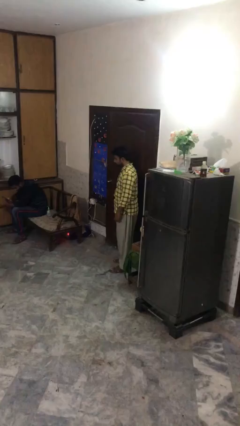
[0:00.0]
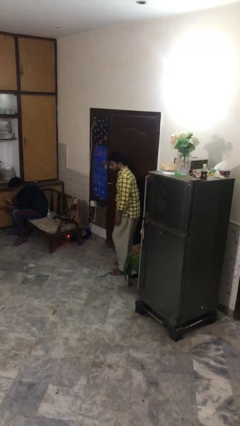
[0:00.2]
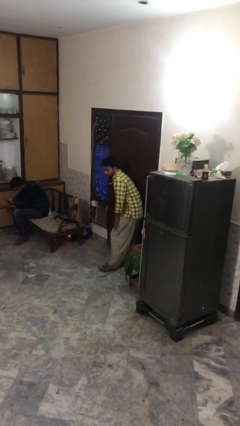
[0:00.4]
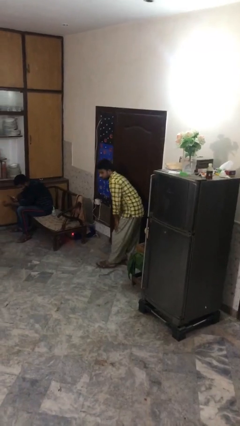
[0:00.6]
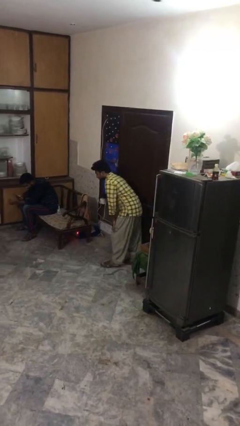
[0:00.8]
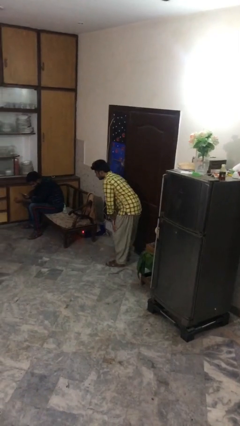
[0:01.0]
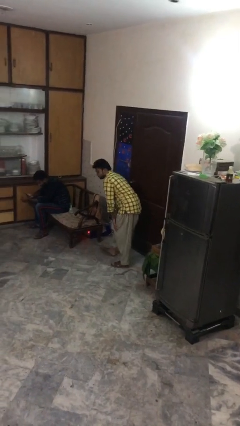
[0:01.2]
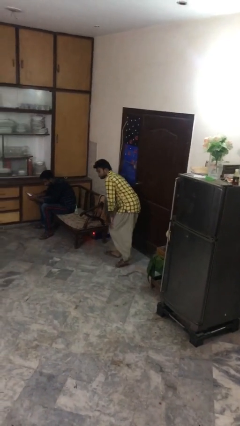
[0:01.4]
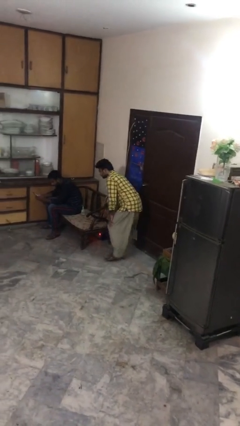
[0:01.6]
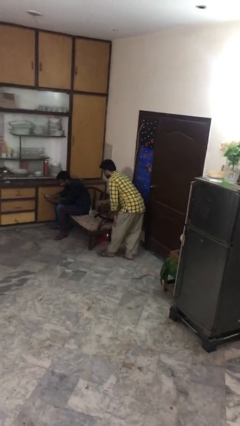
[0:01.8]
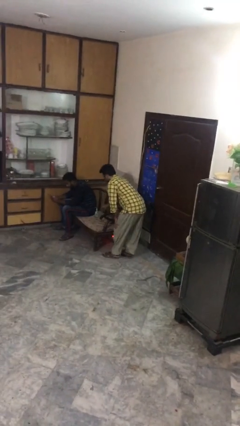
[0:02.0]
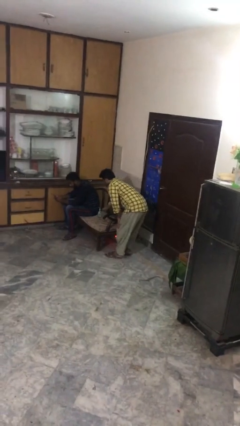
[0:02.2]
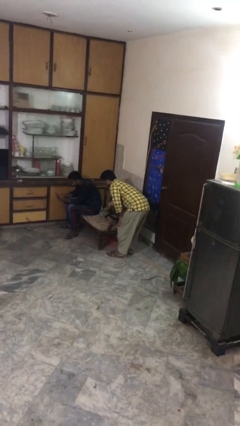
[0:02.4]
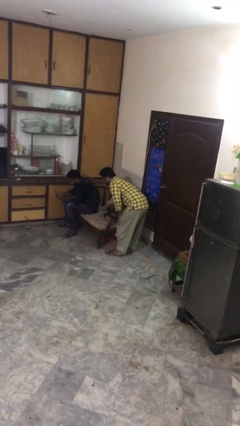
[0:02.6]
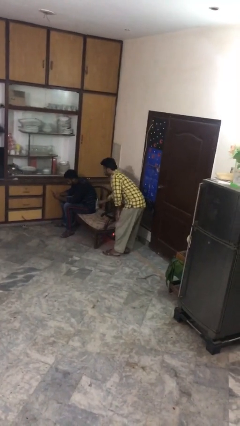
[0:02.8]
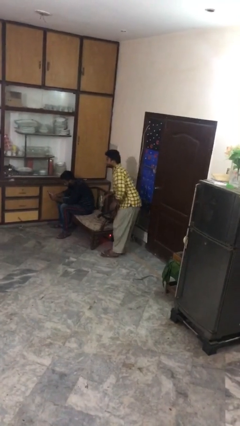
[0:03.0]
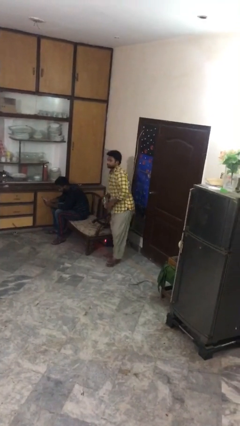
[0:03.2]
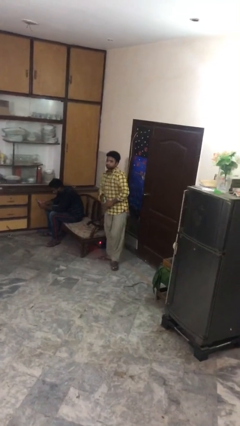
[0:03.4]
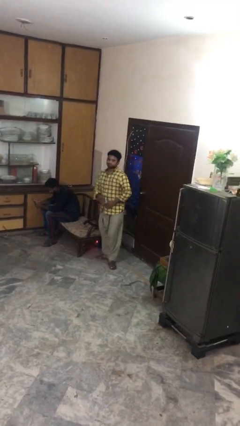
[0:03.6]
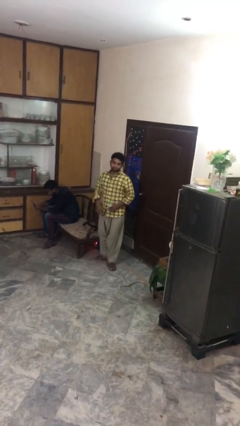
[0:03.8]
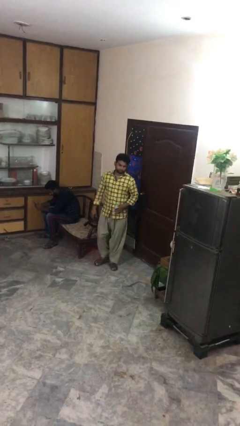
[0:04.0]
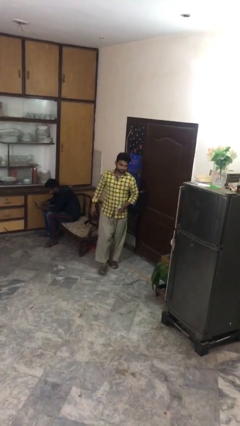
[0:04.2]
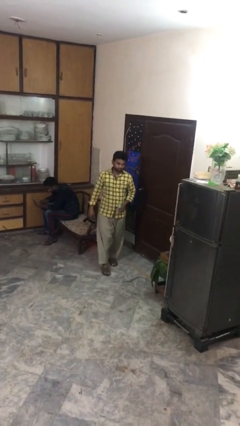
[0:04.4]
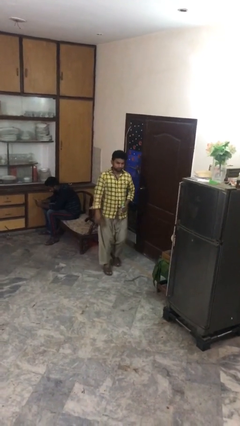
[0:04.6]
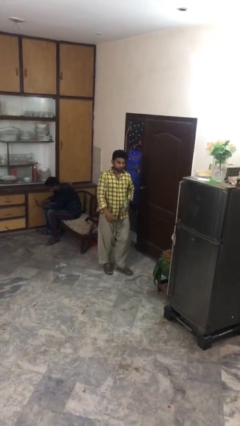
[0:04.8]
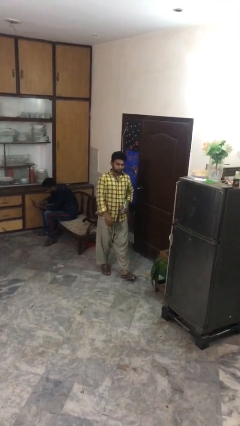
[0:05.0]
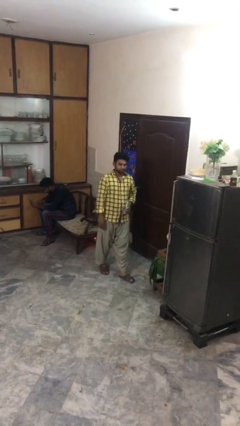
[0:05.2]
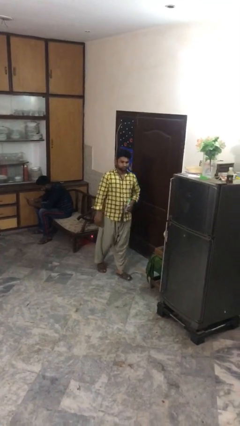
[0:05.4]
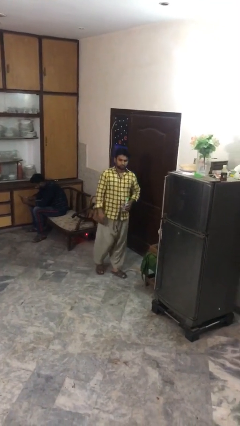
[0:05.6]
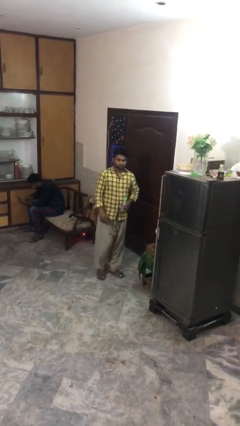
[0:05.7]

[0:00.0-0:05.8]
person steals object from person

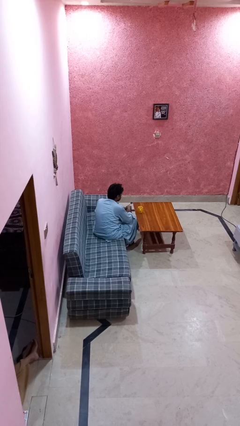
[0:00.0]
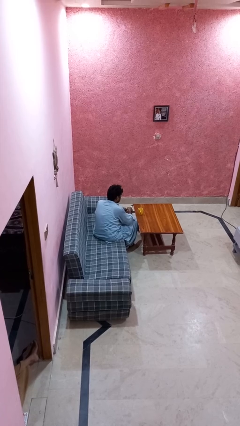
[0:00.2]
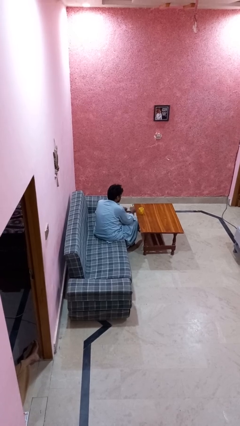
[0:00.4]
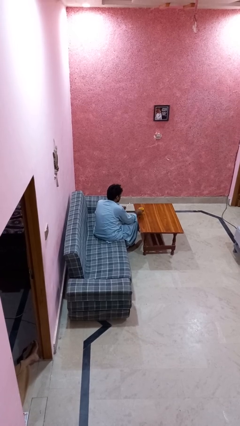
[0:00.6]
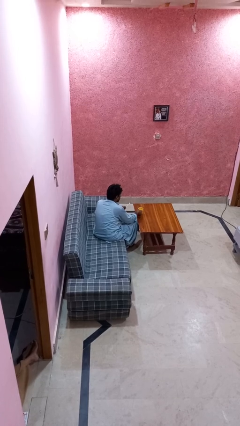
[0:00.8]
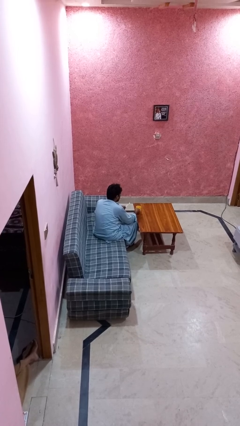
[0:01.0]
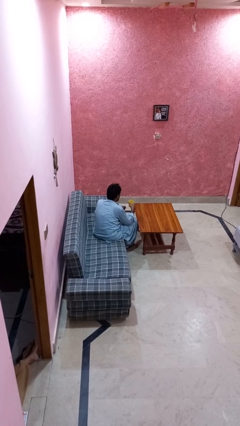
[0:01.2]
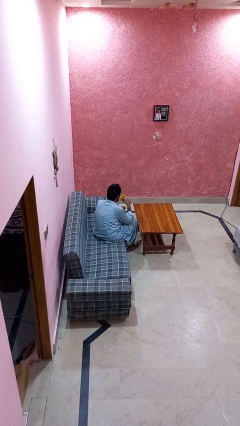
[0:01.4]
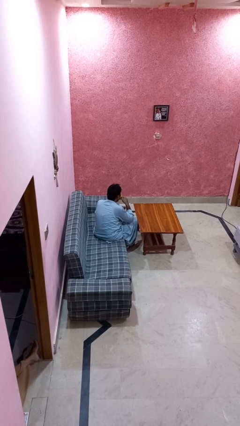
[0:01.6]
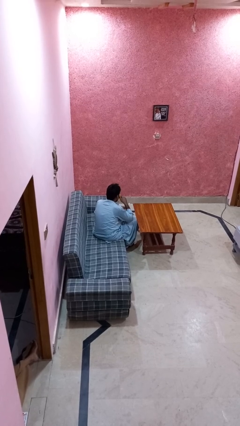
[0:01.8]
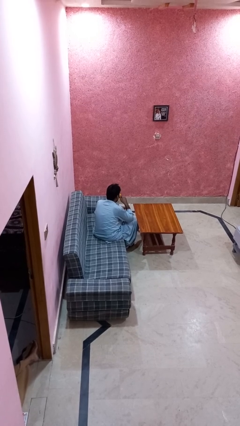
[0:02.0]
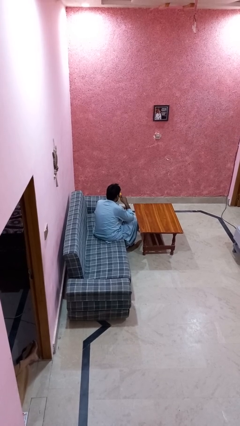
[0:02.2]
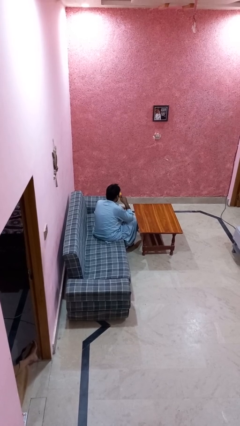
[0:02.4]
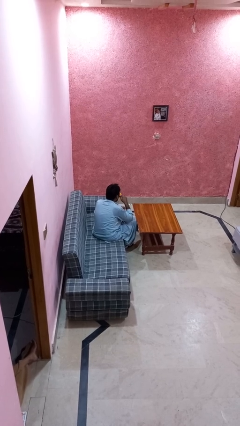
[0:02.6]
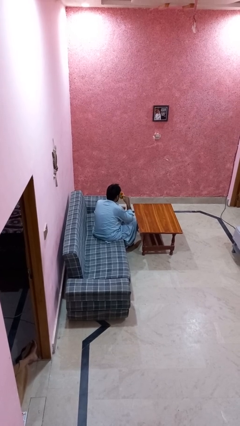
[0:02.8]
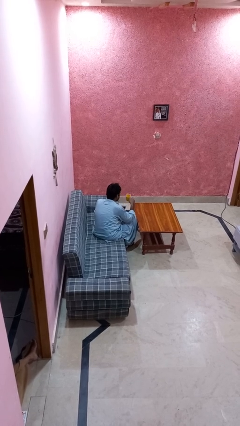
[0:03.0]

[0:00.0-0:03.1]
person drinks from mug

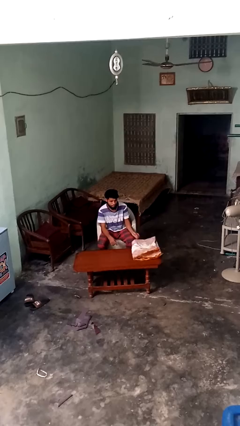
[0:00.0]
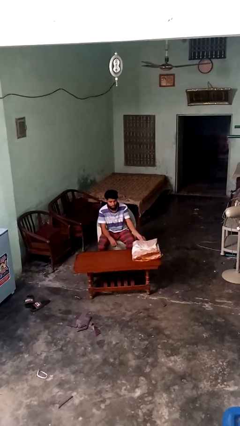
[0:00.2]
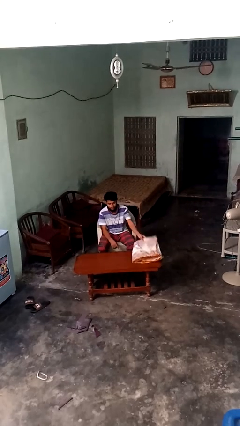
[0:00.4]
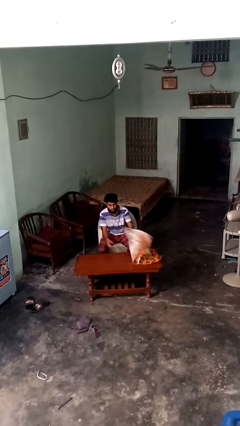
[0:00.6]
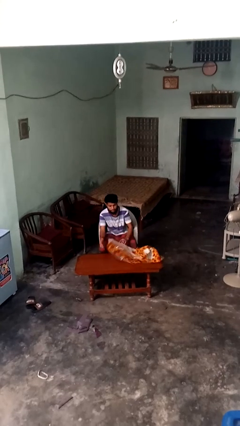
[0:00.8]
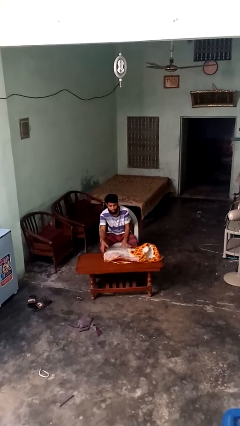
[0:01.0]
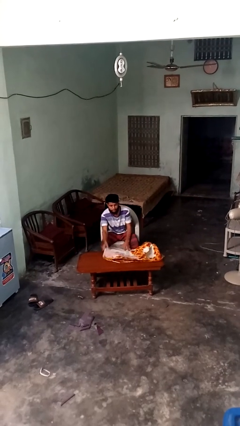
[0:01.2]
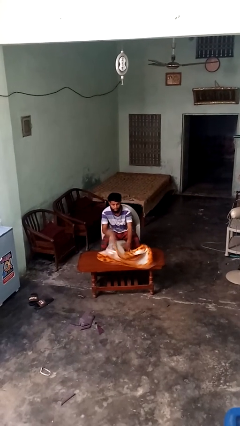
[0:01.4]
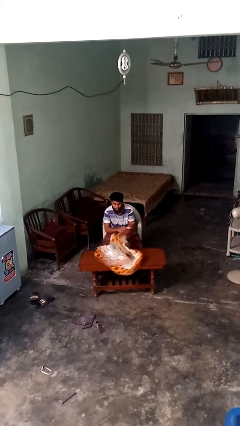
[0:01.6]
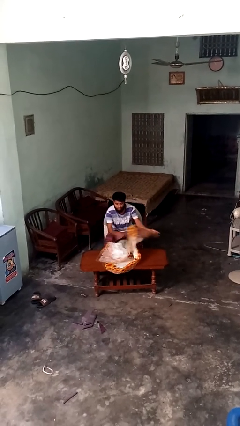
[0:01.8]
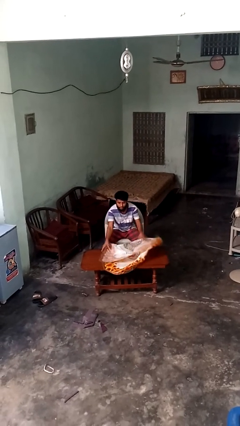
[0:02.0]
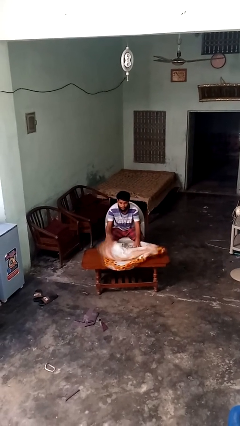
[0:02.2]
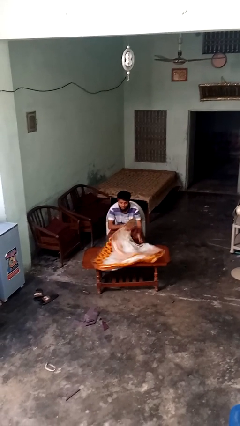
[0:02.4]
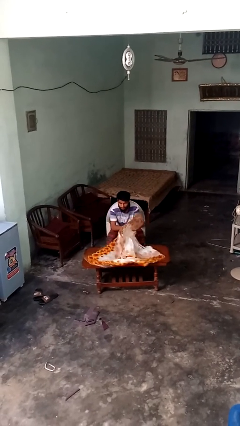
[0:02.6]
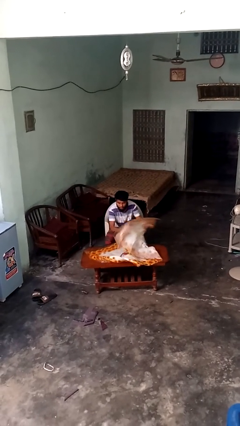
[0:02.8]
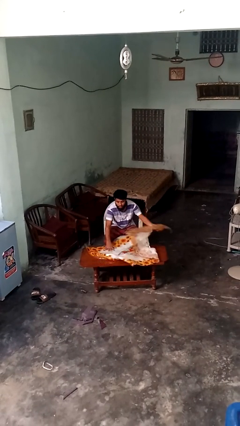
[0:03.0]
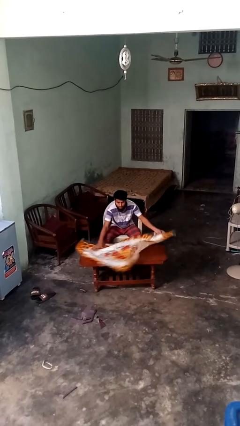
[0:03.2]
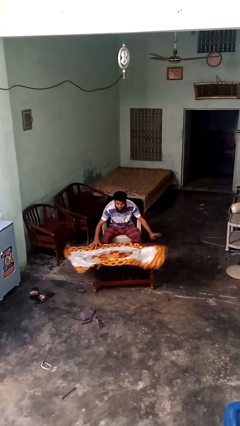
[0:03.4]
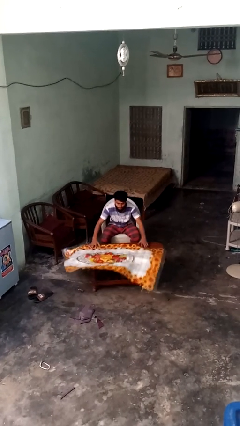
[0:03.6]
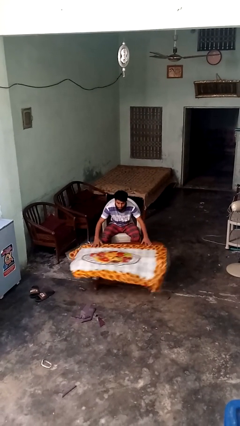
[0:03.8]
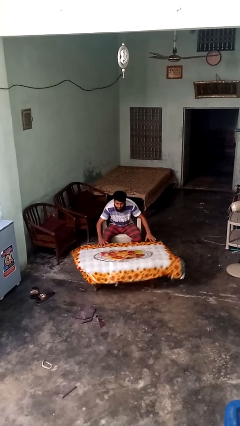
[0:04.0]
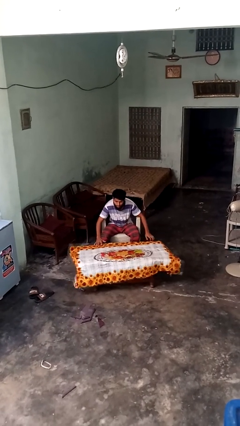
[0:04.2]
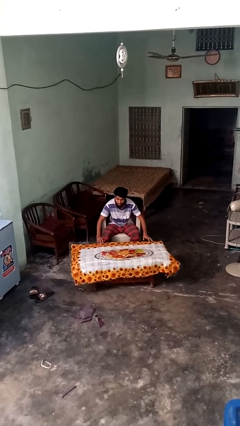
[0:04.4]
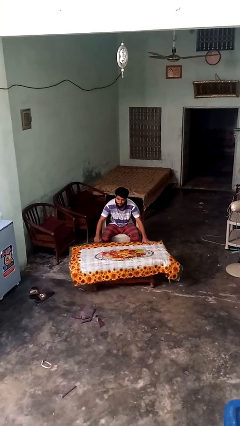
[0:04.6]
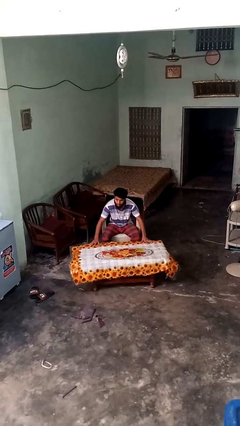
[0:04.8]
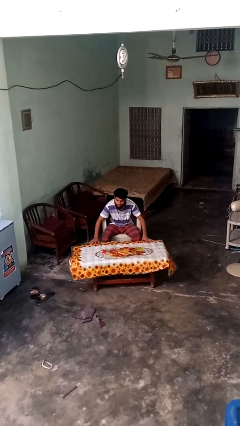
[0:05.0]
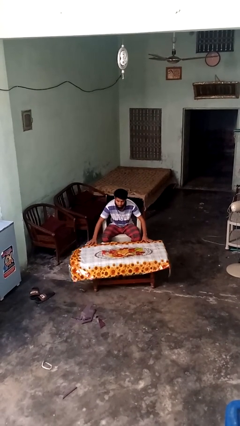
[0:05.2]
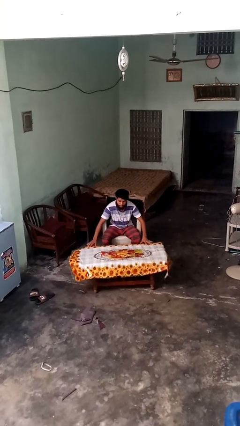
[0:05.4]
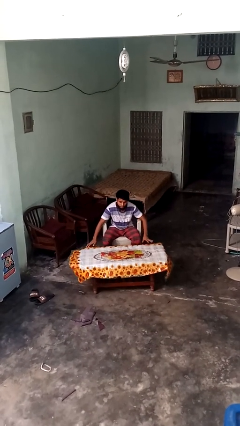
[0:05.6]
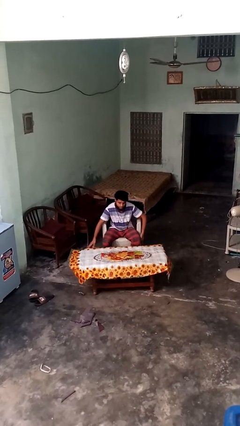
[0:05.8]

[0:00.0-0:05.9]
person spreads tablecloth

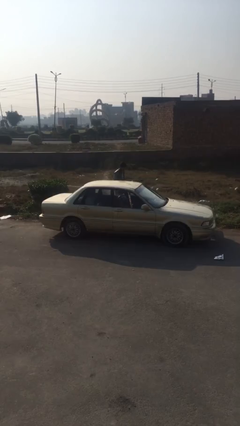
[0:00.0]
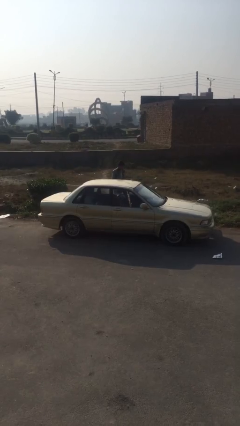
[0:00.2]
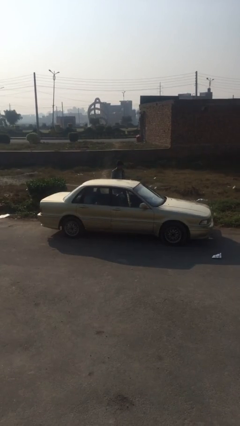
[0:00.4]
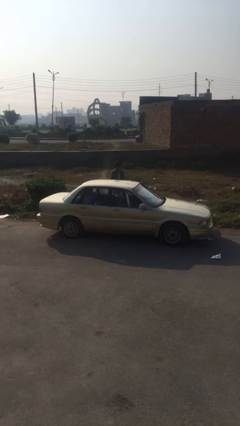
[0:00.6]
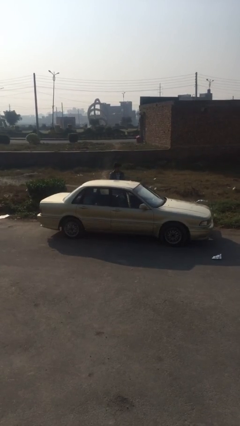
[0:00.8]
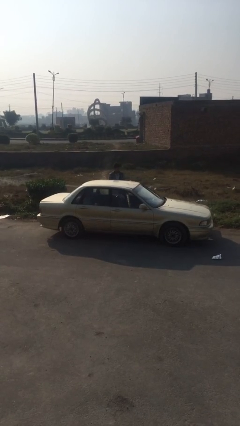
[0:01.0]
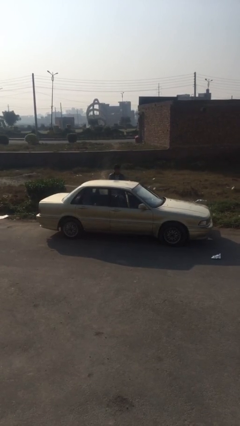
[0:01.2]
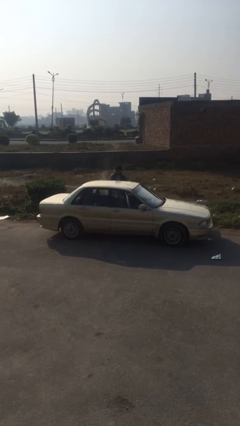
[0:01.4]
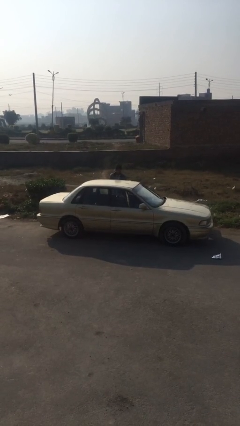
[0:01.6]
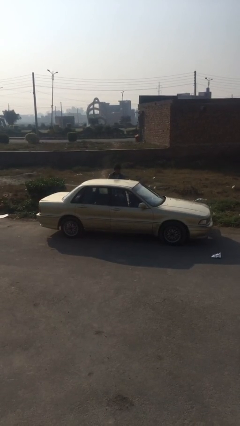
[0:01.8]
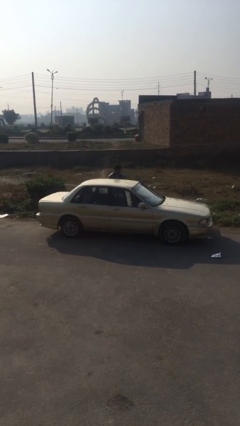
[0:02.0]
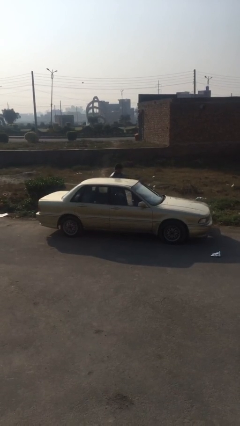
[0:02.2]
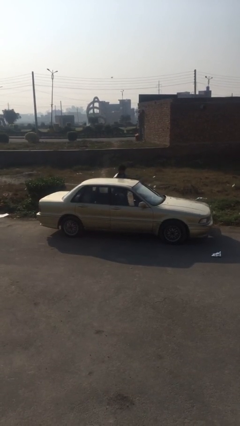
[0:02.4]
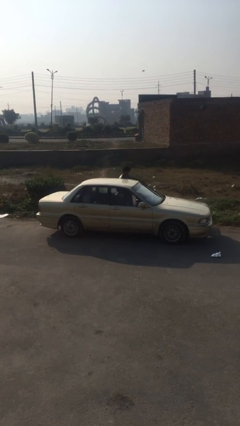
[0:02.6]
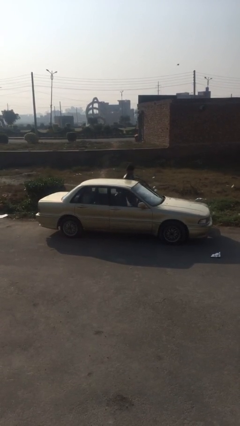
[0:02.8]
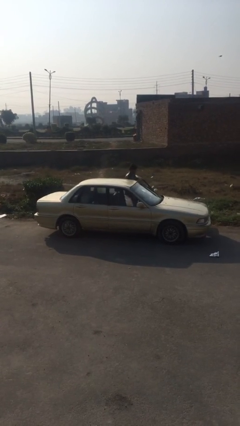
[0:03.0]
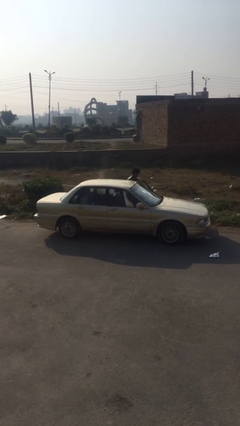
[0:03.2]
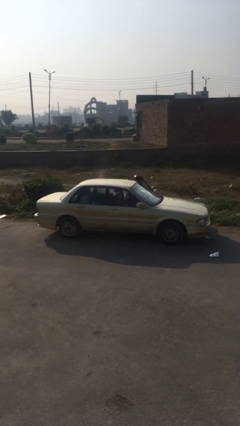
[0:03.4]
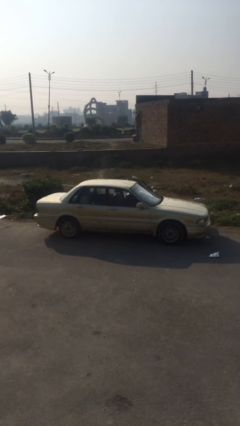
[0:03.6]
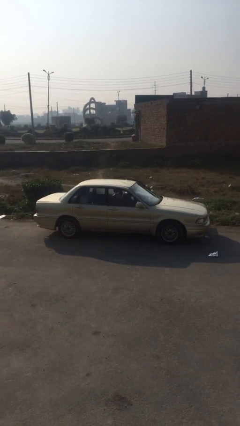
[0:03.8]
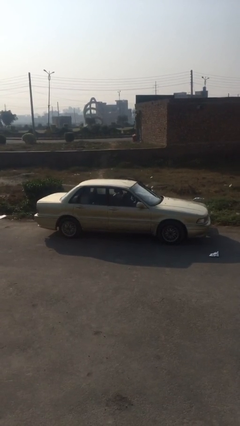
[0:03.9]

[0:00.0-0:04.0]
car picks up person
